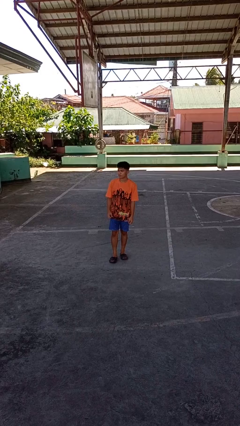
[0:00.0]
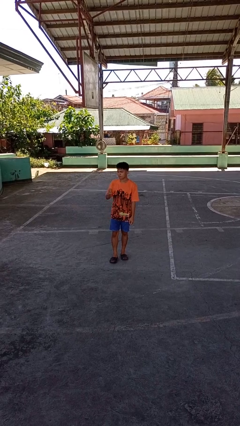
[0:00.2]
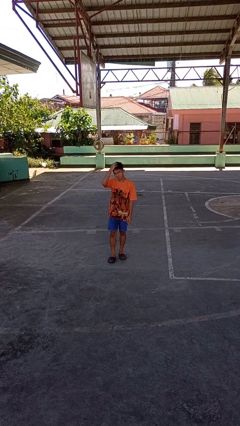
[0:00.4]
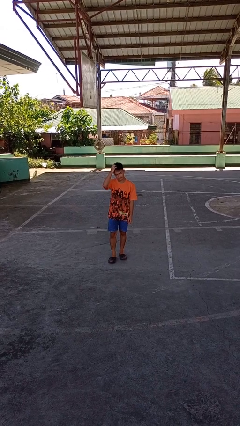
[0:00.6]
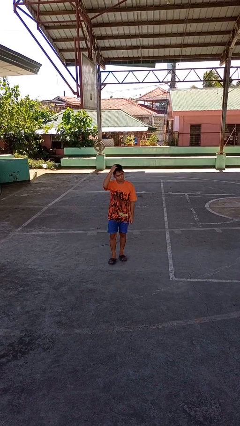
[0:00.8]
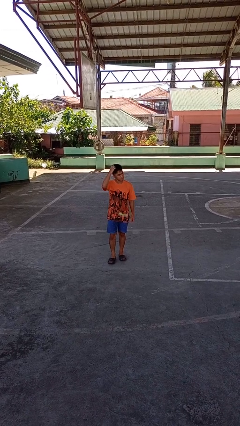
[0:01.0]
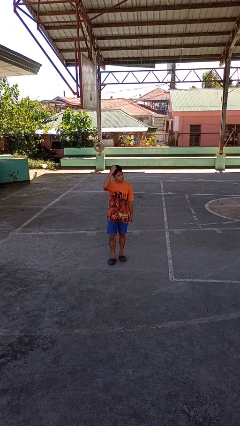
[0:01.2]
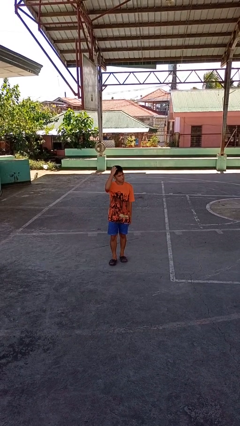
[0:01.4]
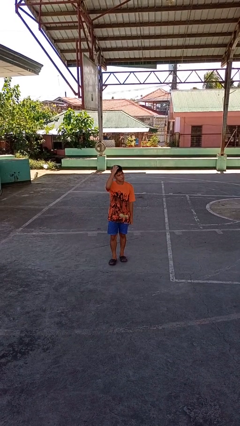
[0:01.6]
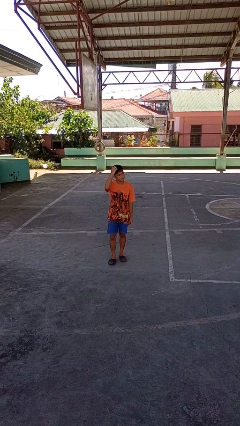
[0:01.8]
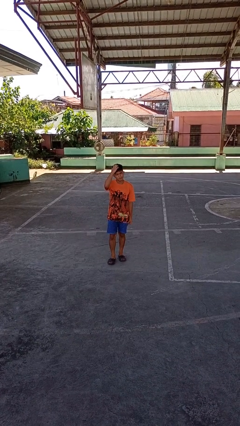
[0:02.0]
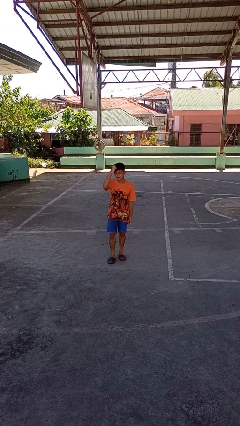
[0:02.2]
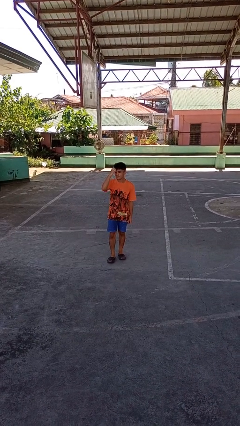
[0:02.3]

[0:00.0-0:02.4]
person scratches face

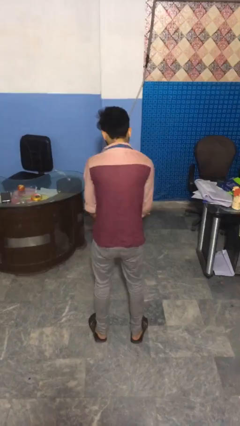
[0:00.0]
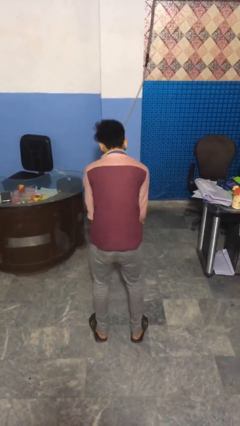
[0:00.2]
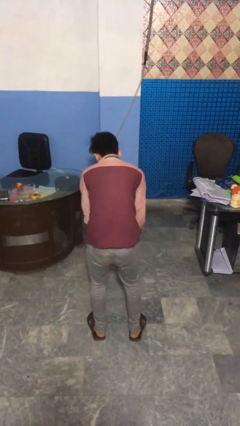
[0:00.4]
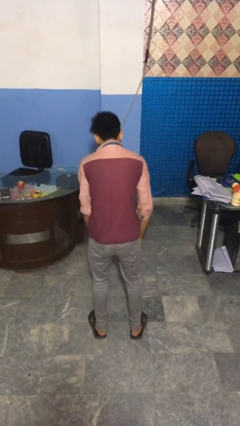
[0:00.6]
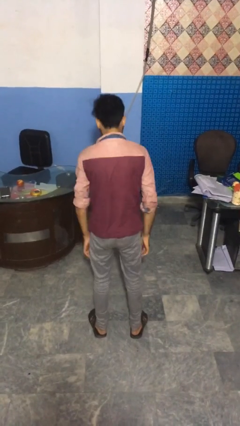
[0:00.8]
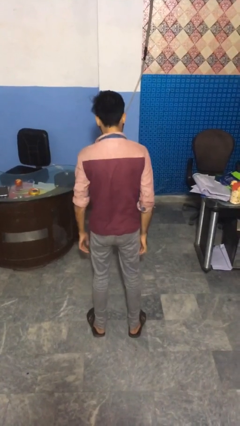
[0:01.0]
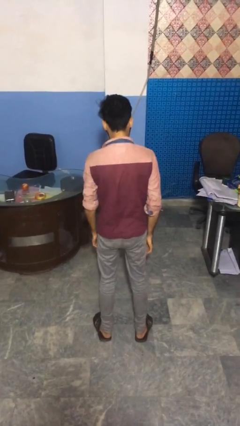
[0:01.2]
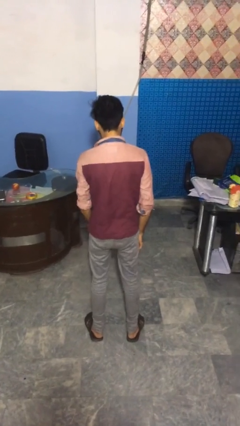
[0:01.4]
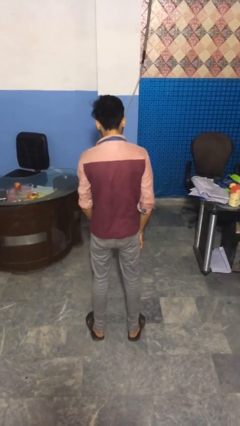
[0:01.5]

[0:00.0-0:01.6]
person catches dropped object

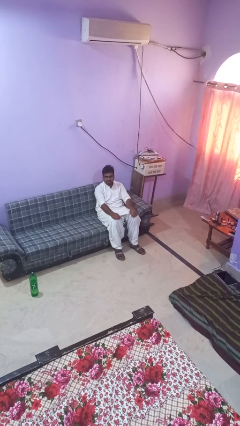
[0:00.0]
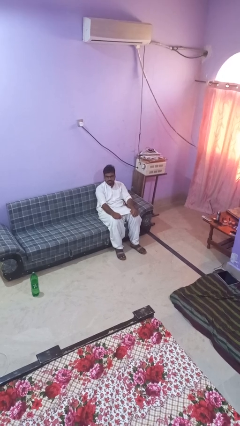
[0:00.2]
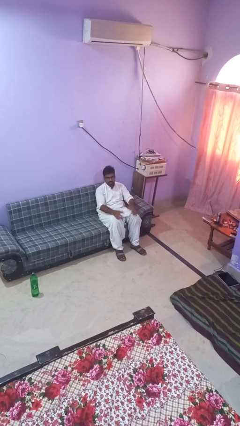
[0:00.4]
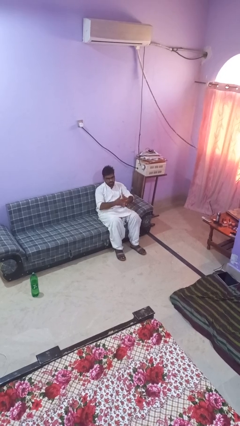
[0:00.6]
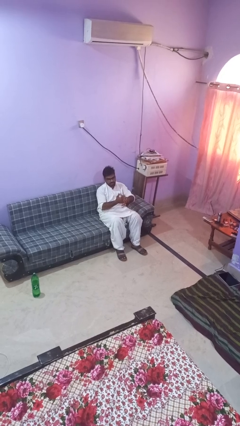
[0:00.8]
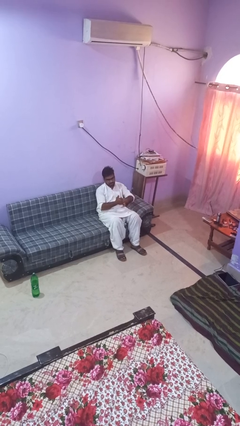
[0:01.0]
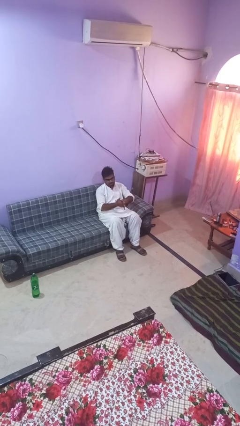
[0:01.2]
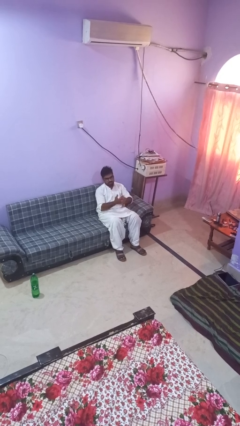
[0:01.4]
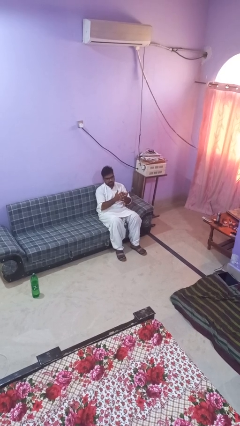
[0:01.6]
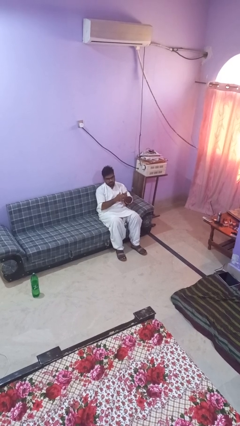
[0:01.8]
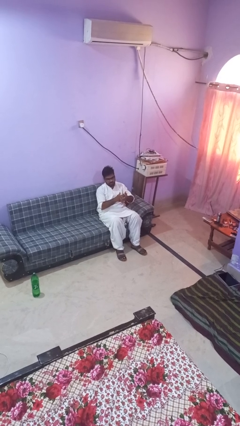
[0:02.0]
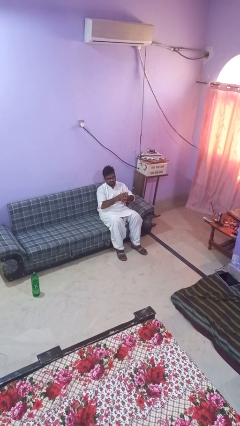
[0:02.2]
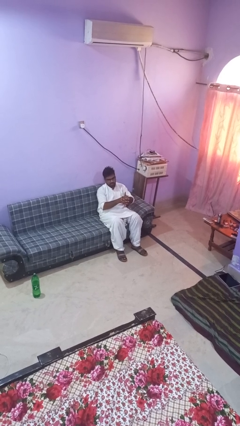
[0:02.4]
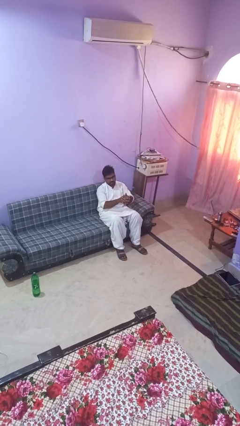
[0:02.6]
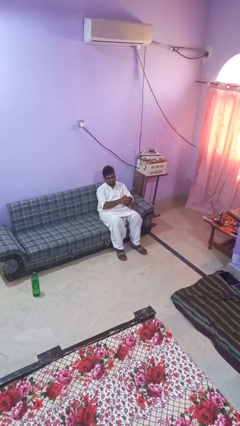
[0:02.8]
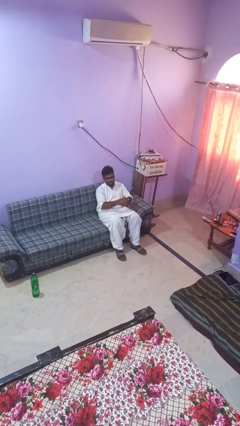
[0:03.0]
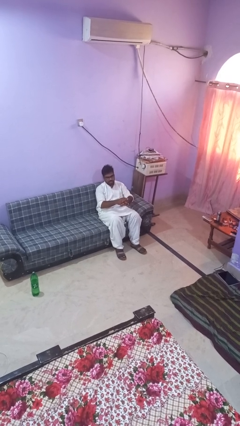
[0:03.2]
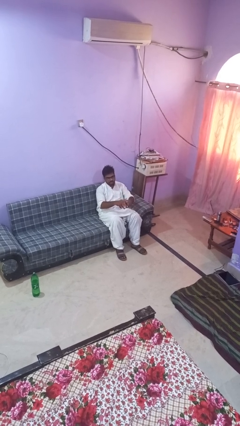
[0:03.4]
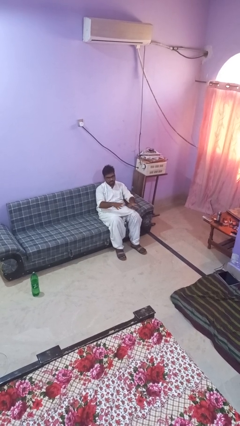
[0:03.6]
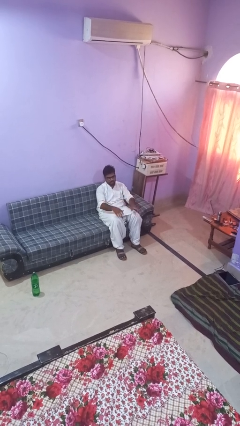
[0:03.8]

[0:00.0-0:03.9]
person cracks knuckles

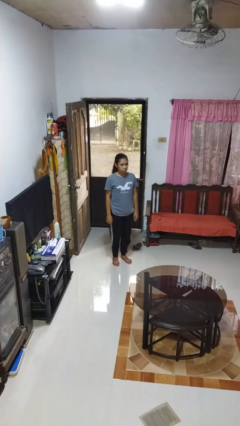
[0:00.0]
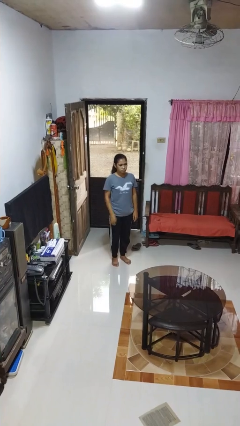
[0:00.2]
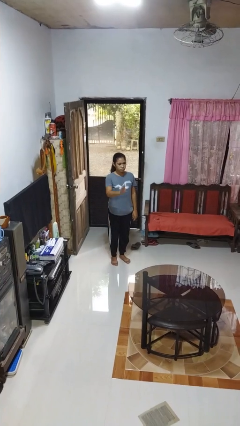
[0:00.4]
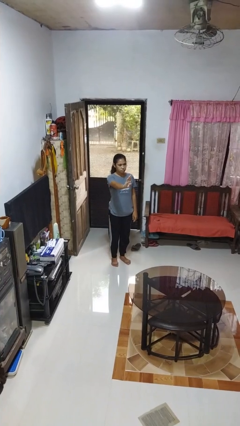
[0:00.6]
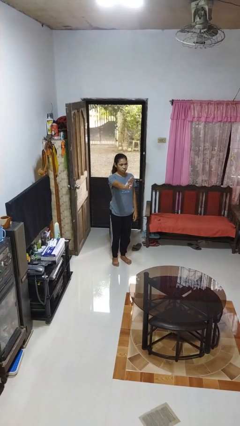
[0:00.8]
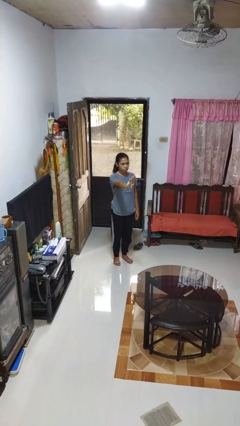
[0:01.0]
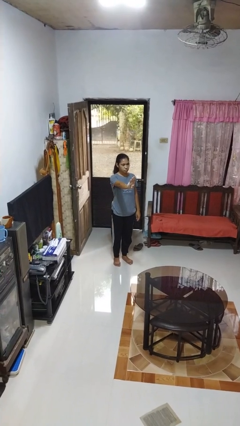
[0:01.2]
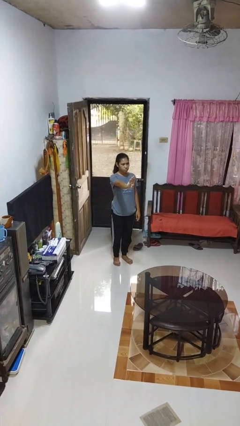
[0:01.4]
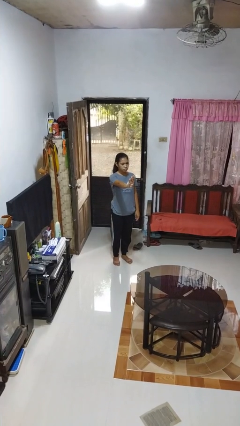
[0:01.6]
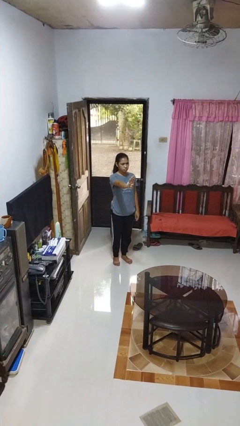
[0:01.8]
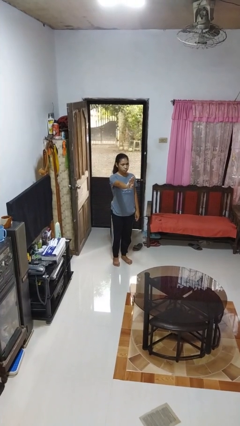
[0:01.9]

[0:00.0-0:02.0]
person gestures number four

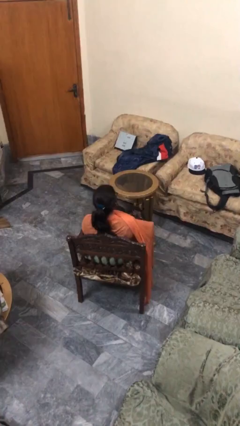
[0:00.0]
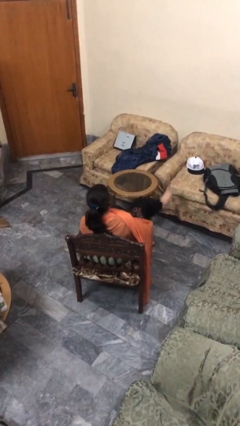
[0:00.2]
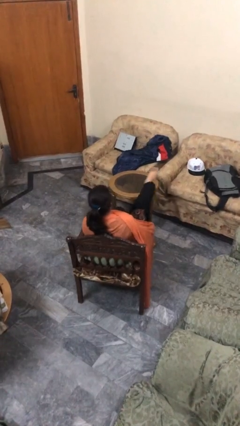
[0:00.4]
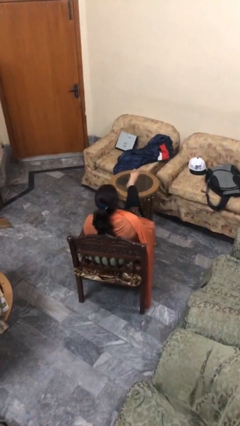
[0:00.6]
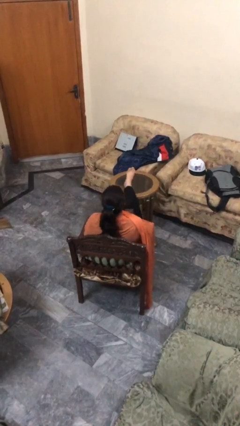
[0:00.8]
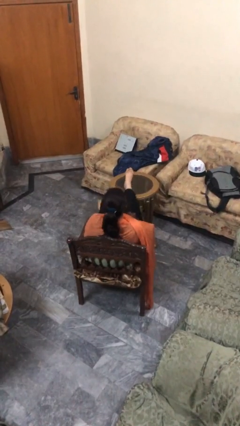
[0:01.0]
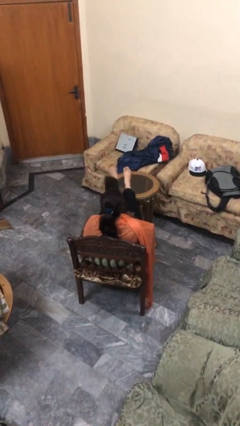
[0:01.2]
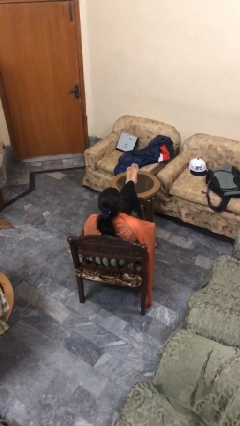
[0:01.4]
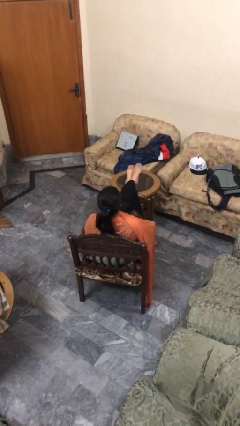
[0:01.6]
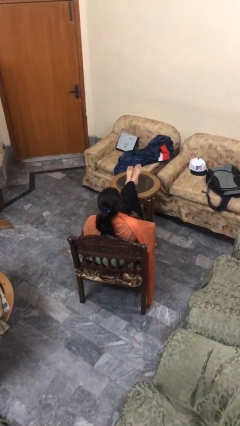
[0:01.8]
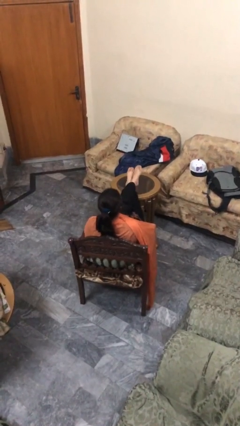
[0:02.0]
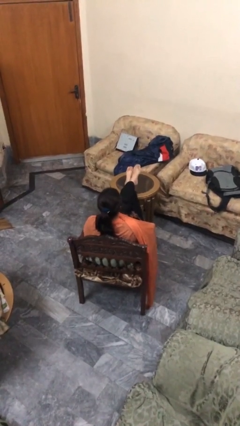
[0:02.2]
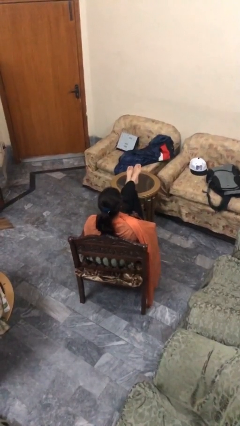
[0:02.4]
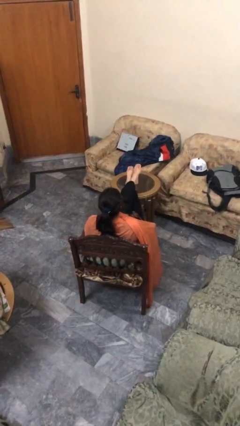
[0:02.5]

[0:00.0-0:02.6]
person puts feet up

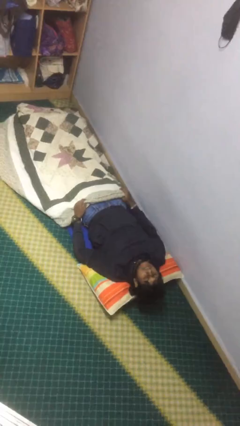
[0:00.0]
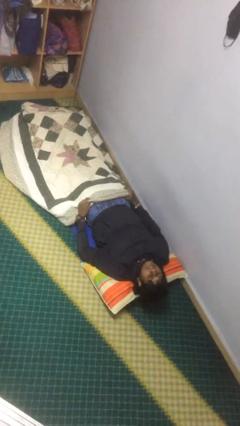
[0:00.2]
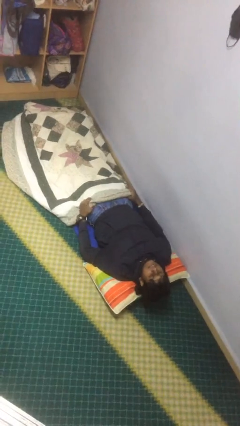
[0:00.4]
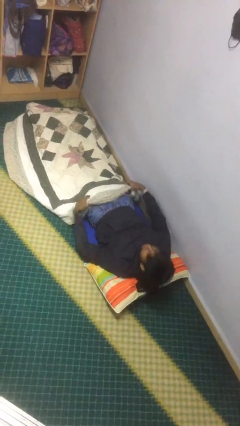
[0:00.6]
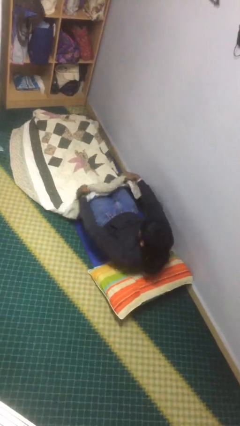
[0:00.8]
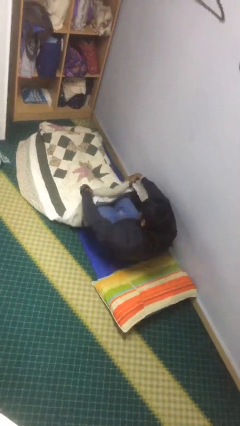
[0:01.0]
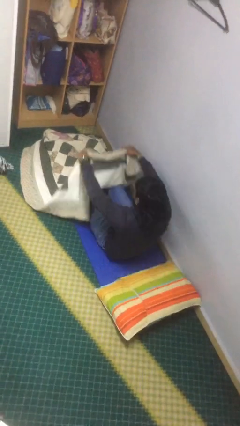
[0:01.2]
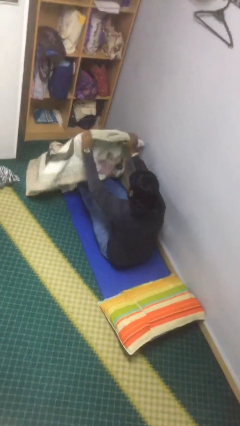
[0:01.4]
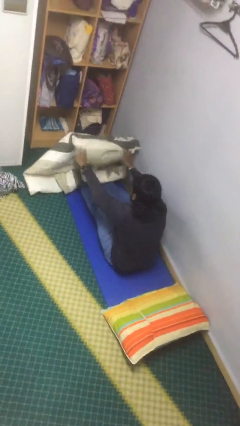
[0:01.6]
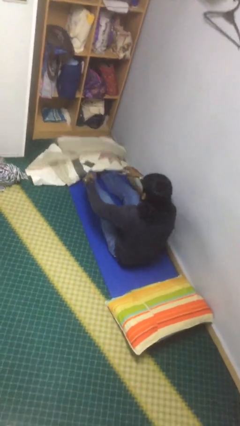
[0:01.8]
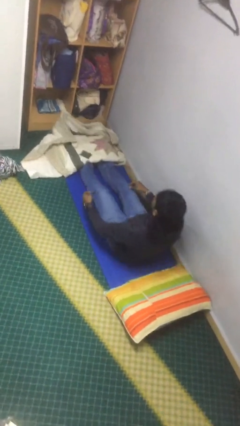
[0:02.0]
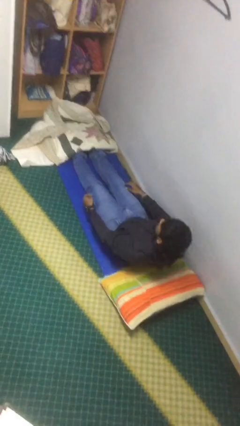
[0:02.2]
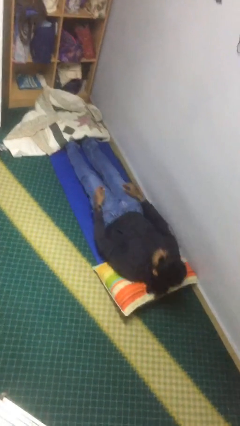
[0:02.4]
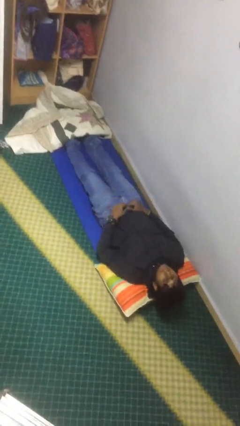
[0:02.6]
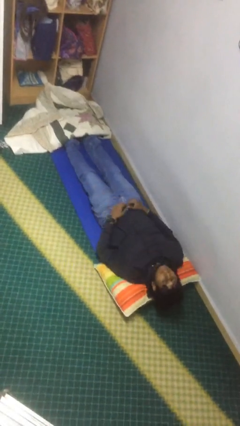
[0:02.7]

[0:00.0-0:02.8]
person uncovers with bedsheets

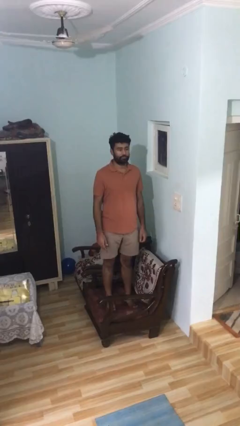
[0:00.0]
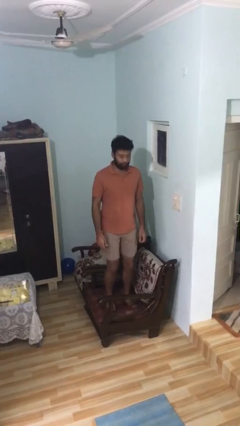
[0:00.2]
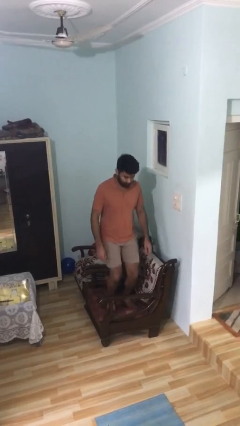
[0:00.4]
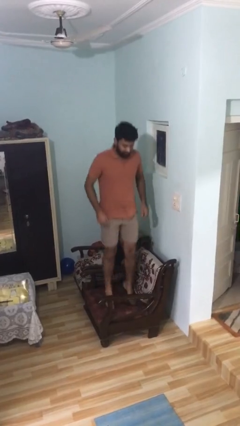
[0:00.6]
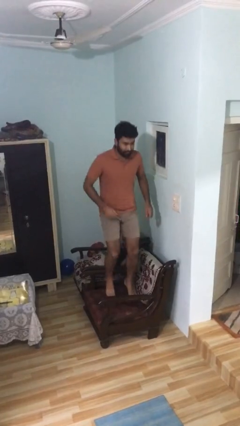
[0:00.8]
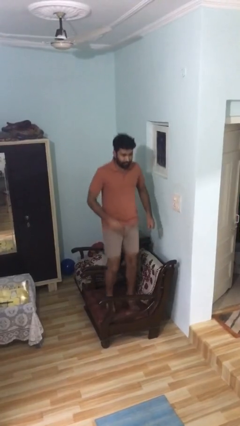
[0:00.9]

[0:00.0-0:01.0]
person jumps on couch

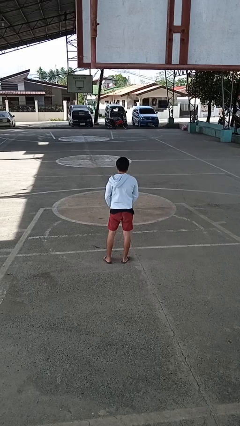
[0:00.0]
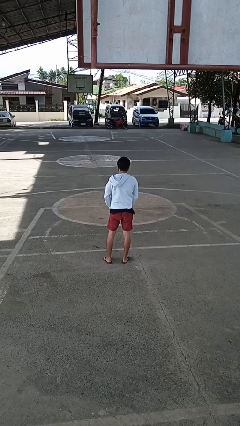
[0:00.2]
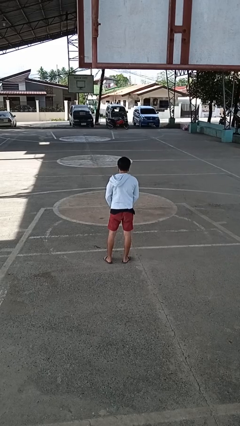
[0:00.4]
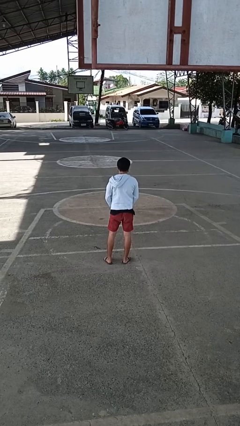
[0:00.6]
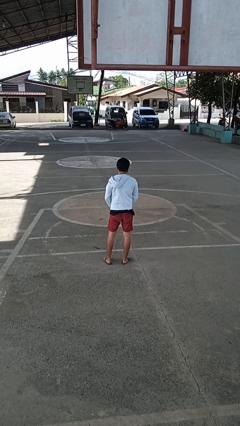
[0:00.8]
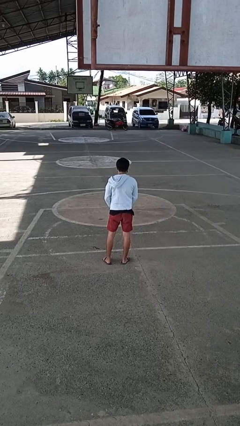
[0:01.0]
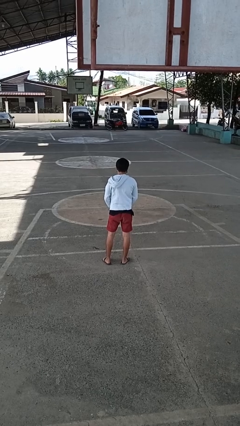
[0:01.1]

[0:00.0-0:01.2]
person unzips jacket
